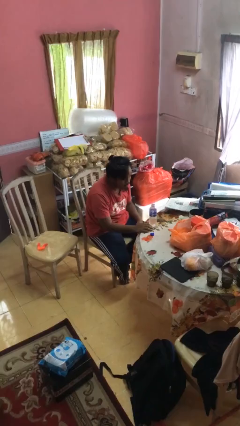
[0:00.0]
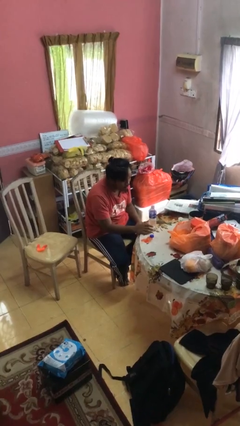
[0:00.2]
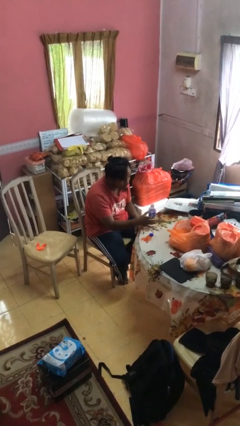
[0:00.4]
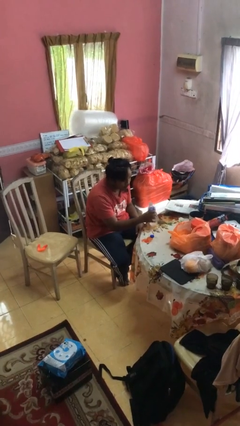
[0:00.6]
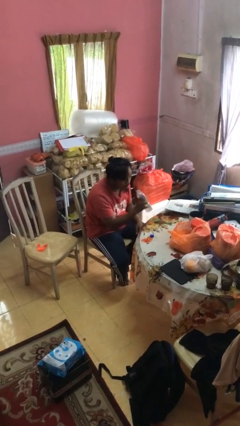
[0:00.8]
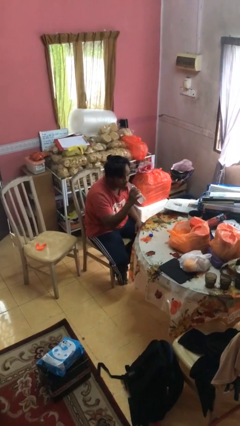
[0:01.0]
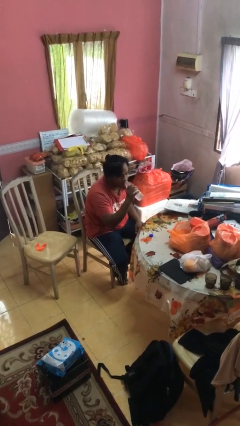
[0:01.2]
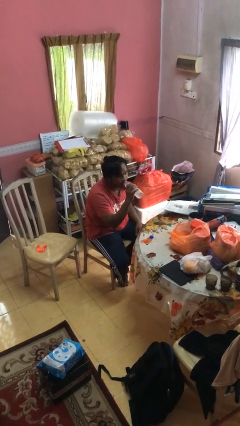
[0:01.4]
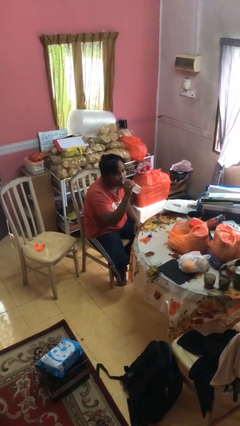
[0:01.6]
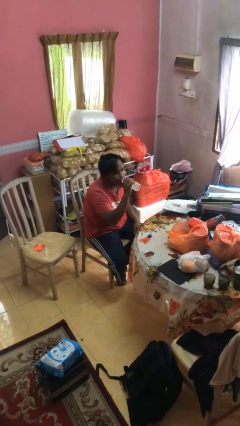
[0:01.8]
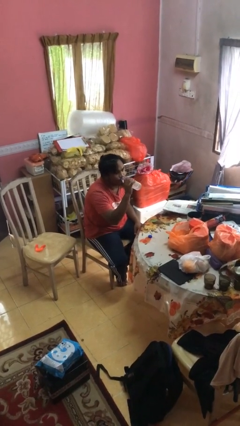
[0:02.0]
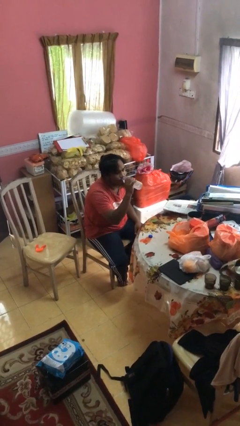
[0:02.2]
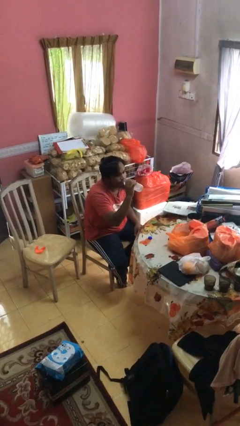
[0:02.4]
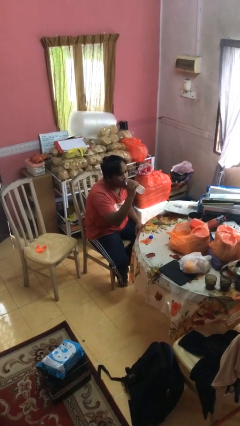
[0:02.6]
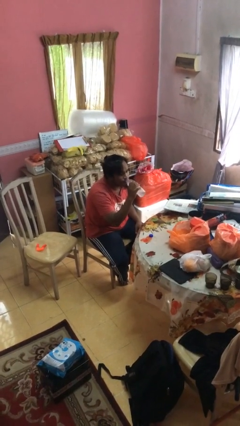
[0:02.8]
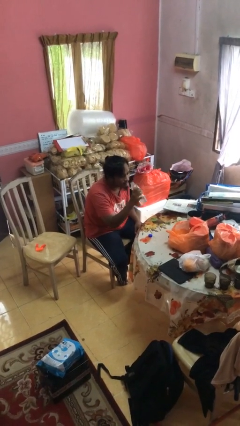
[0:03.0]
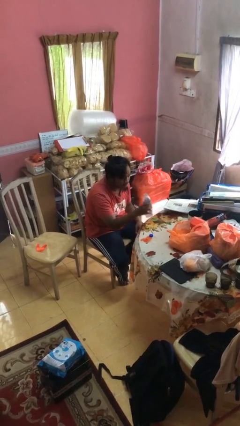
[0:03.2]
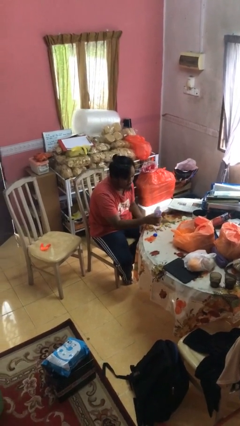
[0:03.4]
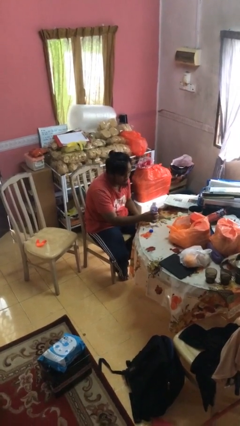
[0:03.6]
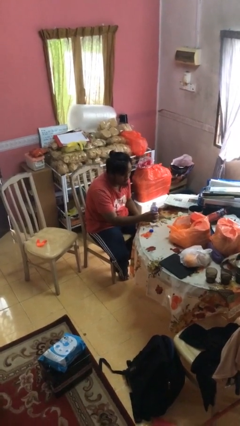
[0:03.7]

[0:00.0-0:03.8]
person drinks from bottle

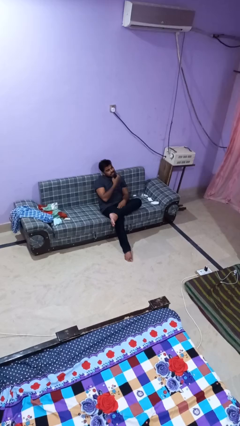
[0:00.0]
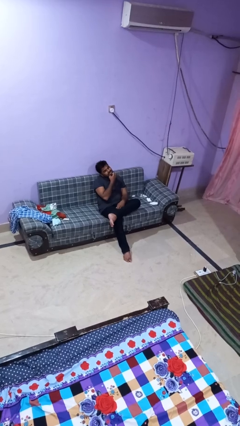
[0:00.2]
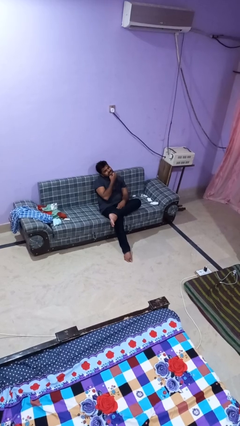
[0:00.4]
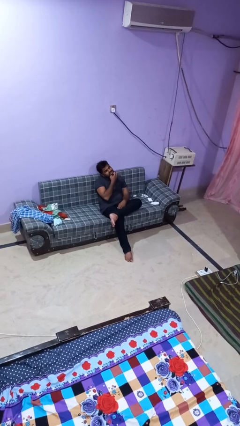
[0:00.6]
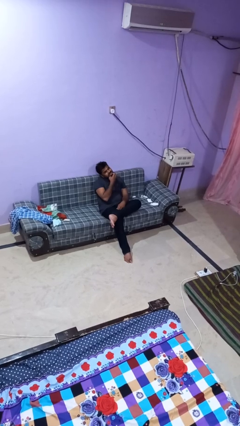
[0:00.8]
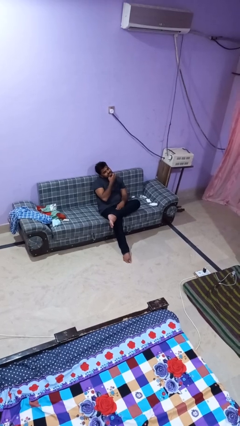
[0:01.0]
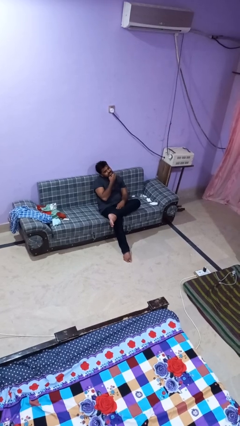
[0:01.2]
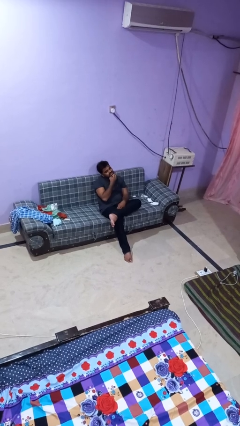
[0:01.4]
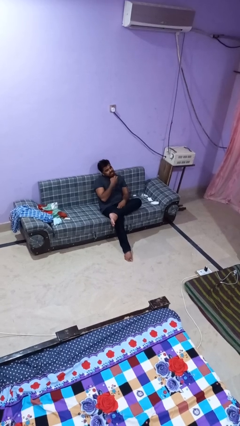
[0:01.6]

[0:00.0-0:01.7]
person strokes chin

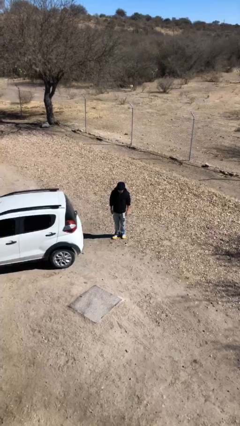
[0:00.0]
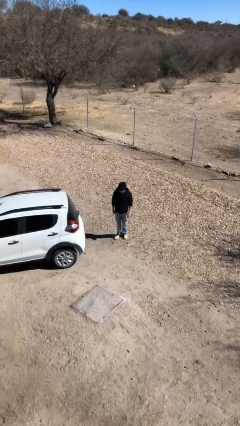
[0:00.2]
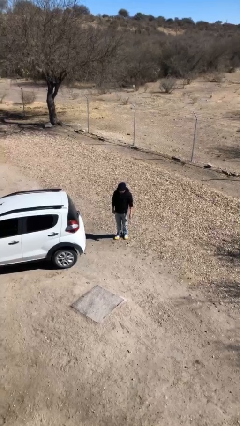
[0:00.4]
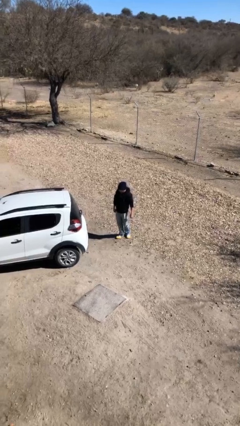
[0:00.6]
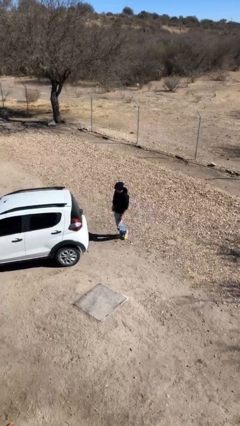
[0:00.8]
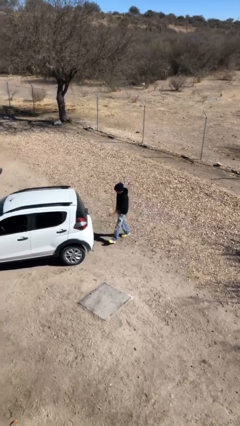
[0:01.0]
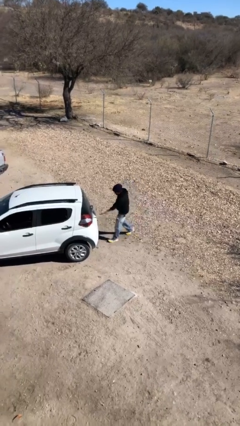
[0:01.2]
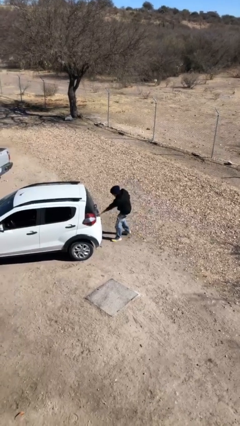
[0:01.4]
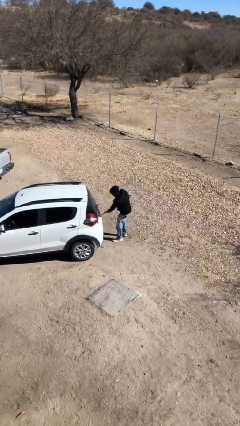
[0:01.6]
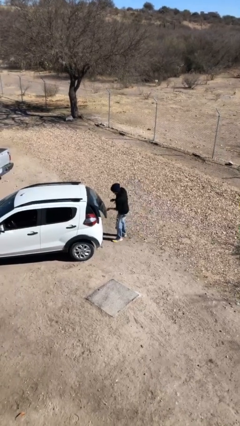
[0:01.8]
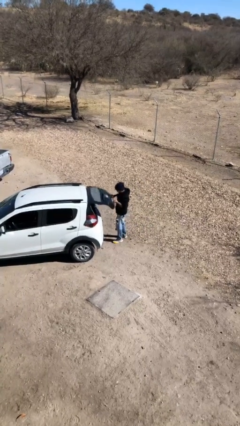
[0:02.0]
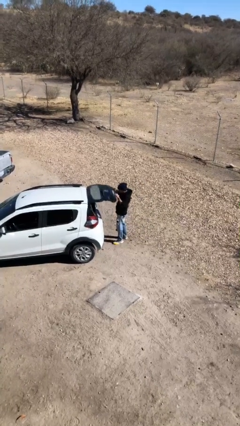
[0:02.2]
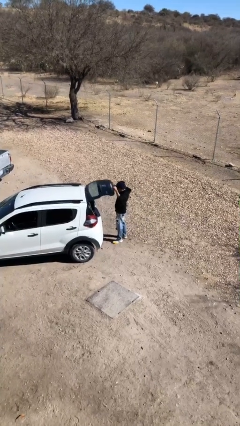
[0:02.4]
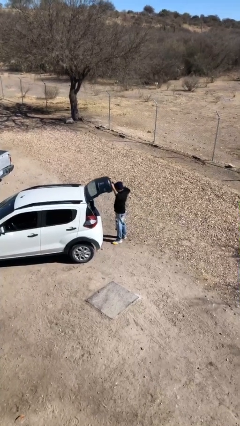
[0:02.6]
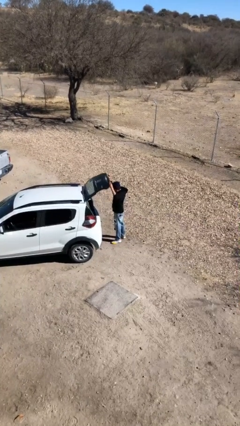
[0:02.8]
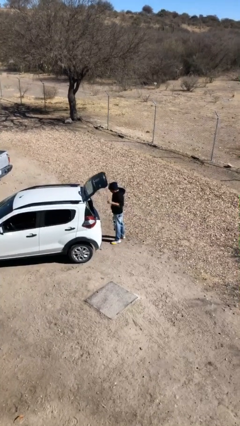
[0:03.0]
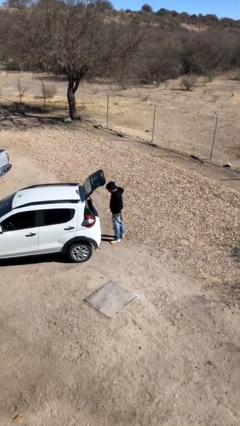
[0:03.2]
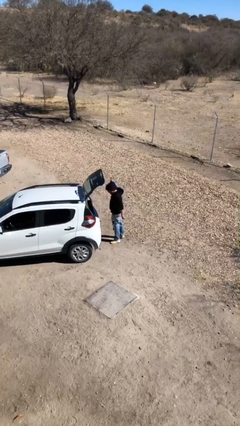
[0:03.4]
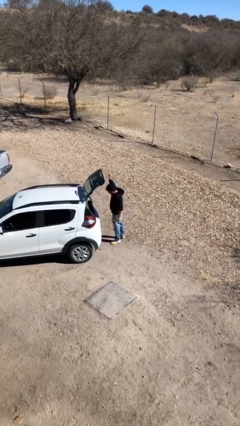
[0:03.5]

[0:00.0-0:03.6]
person opens car trunk

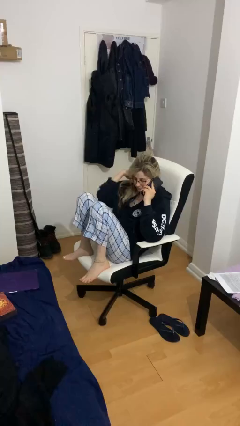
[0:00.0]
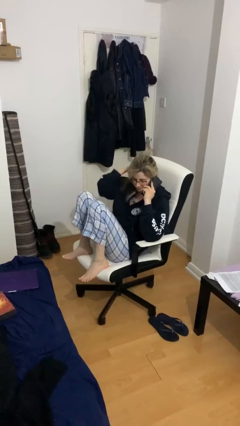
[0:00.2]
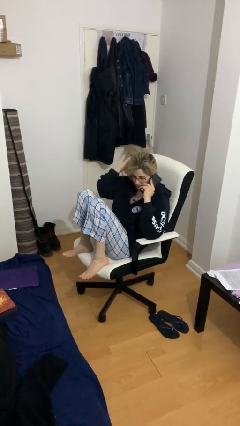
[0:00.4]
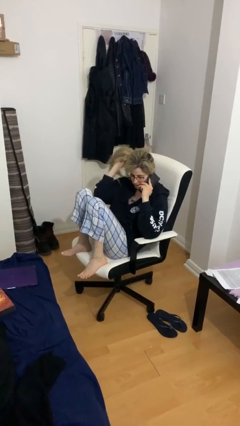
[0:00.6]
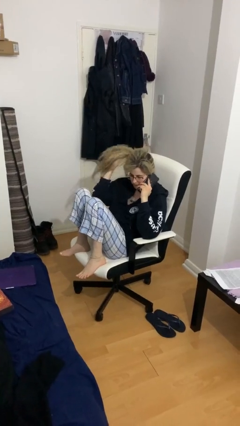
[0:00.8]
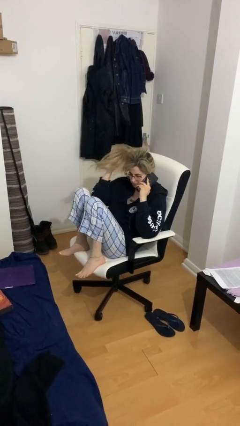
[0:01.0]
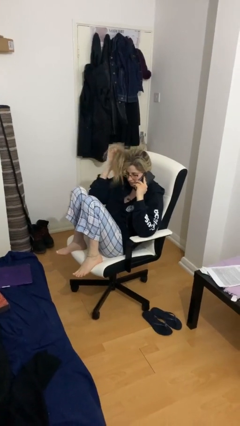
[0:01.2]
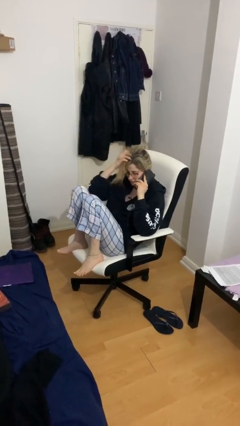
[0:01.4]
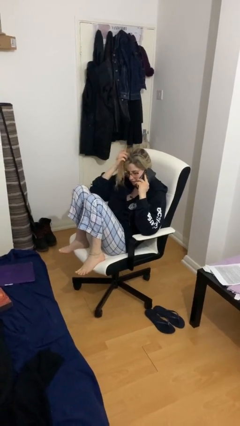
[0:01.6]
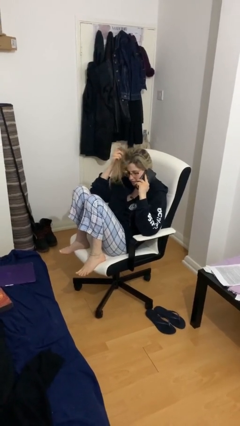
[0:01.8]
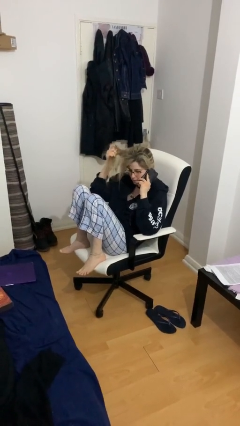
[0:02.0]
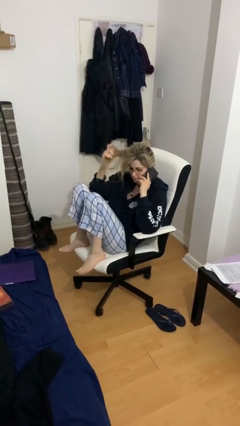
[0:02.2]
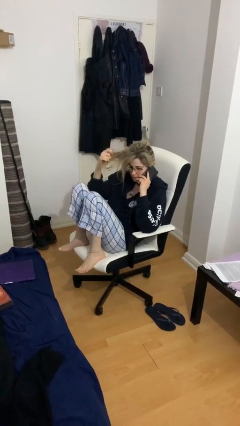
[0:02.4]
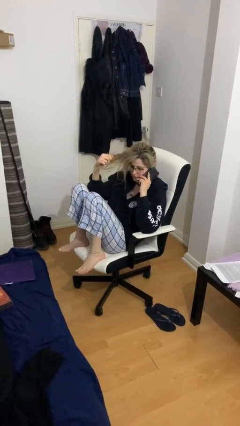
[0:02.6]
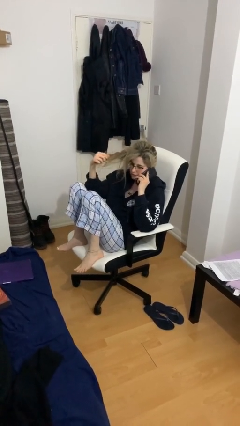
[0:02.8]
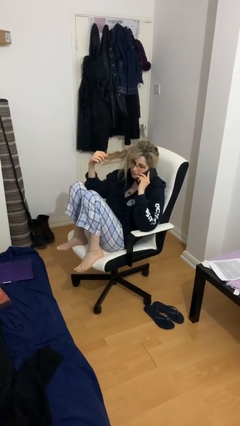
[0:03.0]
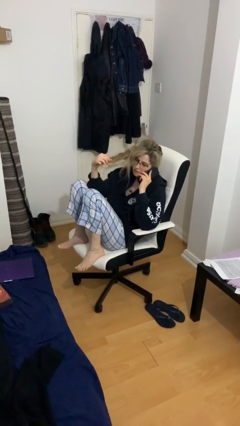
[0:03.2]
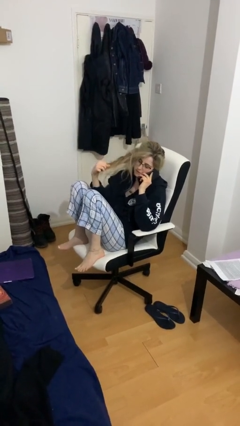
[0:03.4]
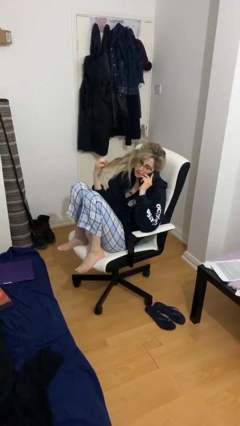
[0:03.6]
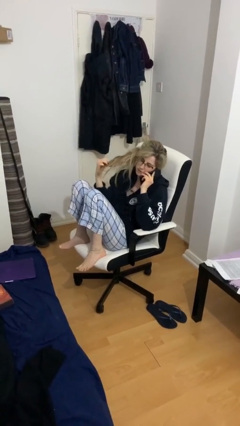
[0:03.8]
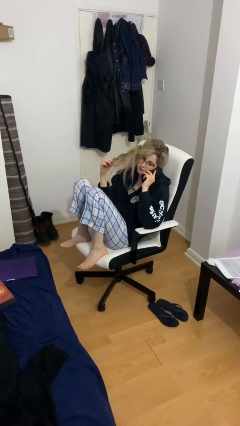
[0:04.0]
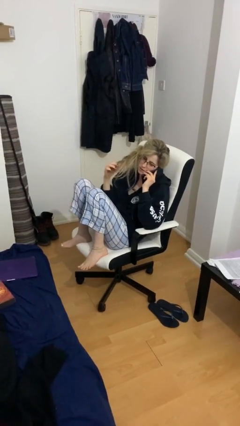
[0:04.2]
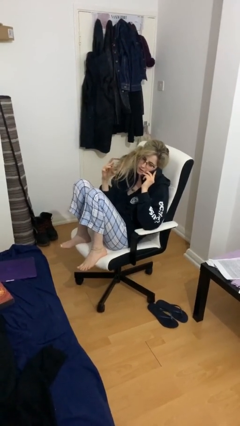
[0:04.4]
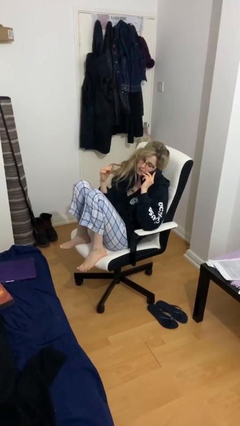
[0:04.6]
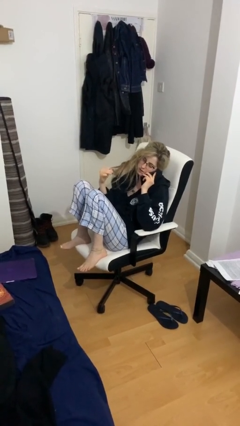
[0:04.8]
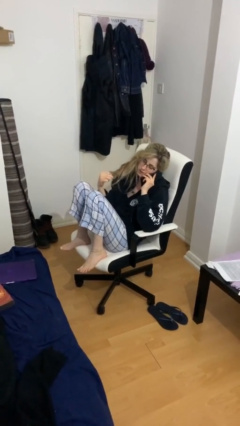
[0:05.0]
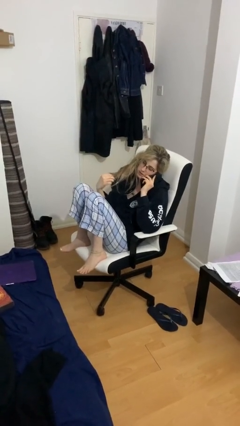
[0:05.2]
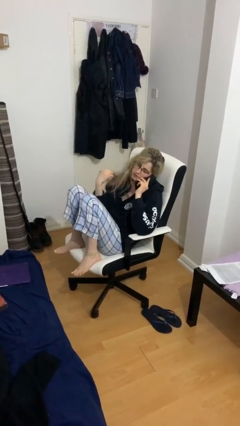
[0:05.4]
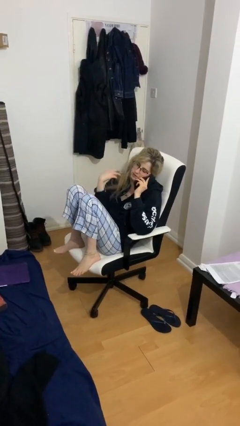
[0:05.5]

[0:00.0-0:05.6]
person talks on phone

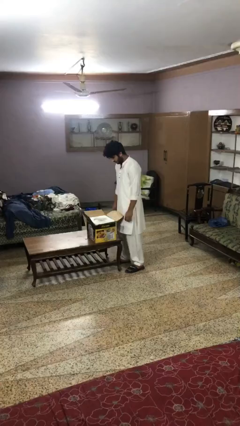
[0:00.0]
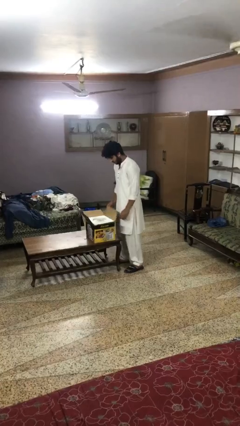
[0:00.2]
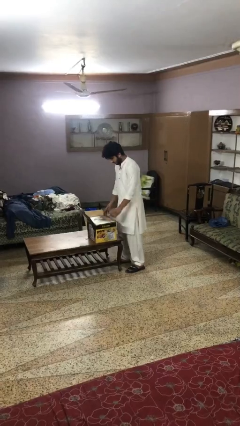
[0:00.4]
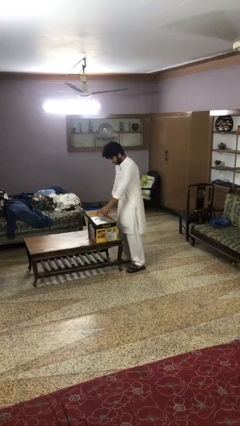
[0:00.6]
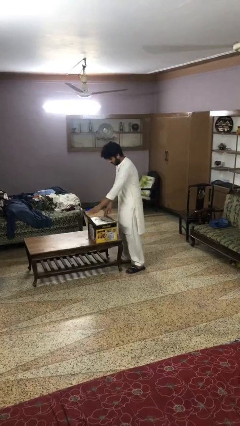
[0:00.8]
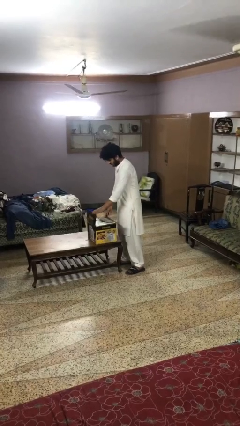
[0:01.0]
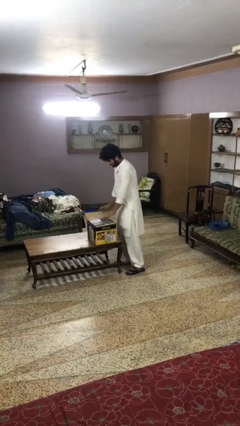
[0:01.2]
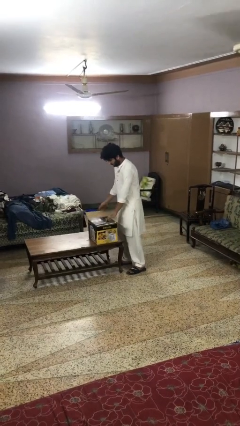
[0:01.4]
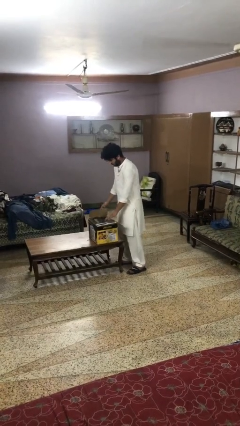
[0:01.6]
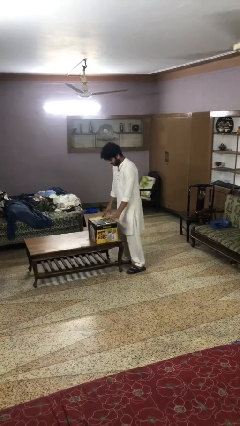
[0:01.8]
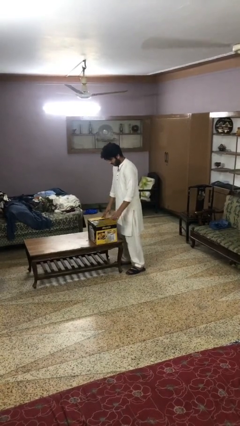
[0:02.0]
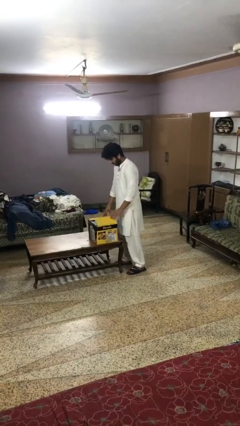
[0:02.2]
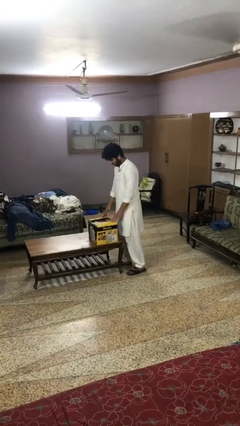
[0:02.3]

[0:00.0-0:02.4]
person closes box

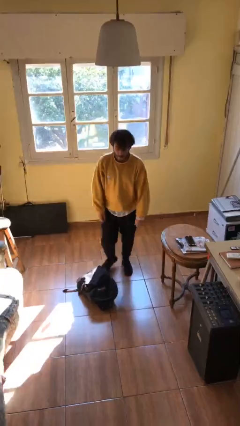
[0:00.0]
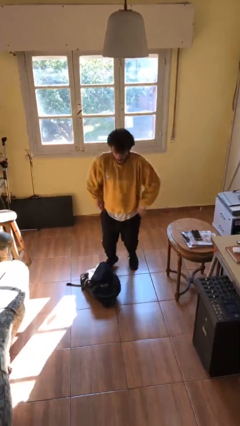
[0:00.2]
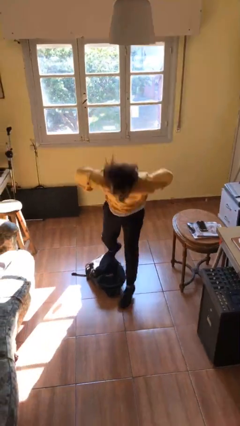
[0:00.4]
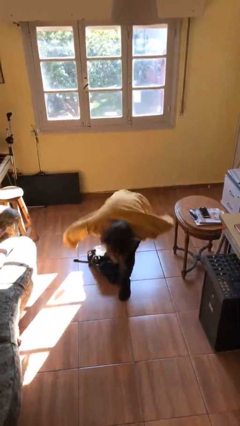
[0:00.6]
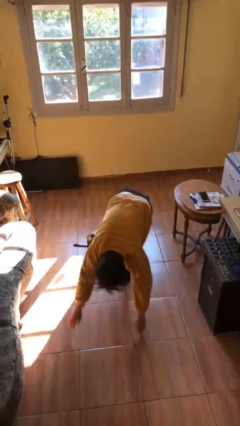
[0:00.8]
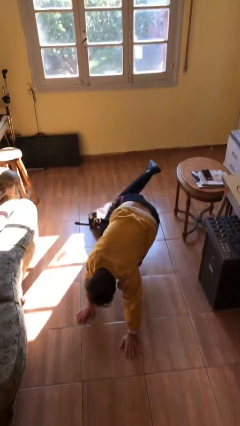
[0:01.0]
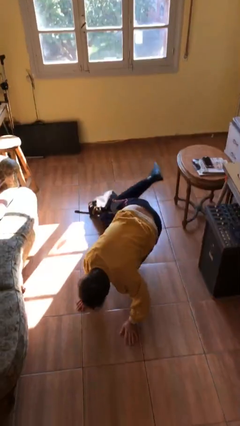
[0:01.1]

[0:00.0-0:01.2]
person trips on object on floor
